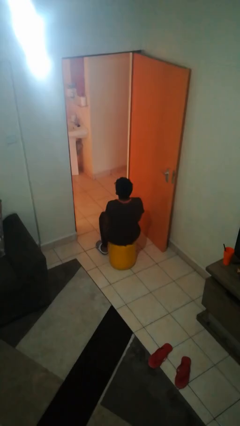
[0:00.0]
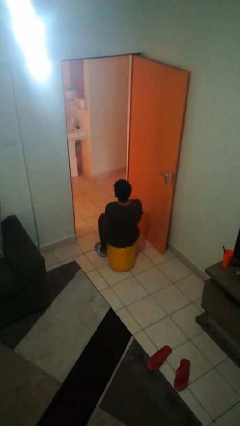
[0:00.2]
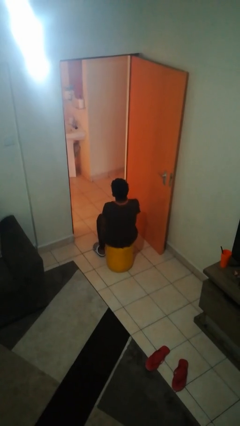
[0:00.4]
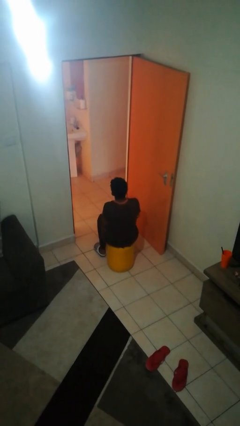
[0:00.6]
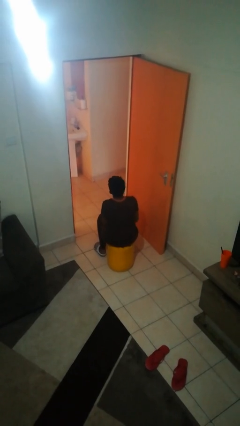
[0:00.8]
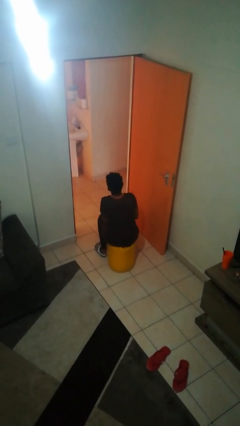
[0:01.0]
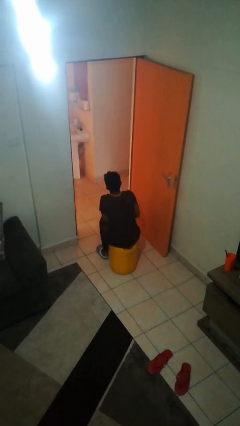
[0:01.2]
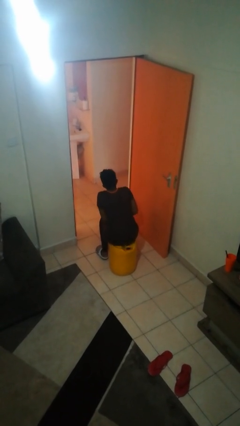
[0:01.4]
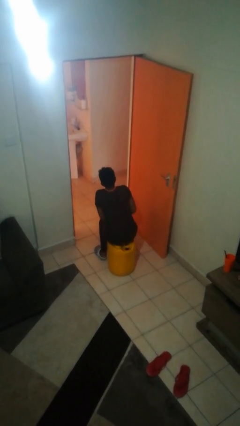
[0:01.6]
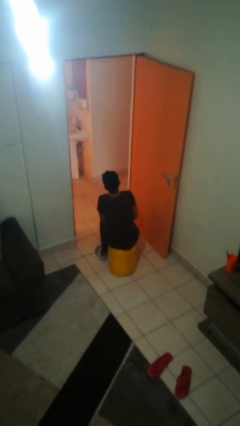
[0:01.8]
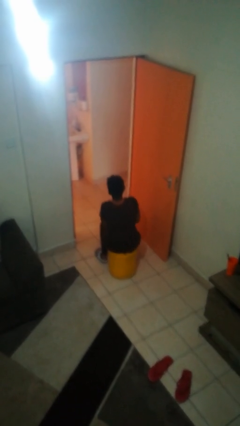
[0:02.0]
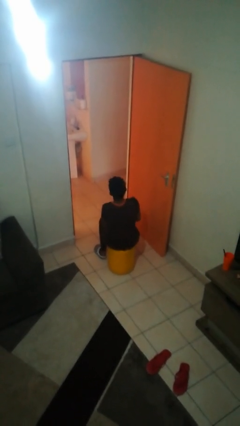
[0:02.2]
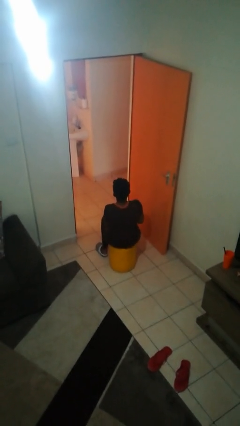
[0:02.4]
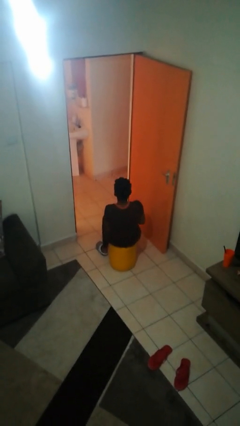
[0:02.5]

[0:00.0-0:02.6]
person slaps hands on thighs

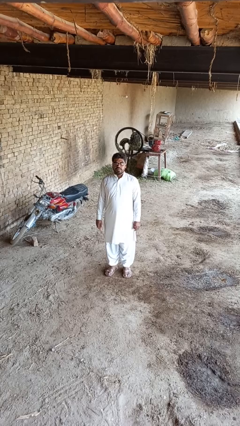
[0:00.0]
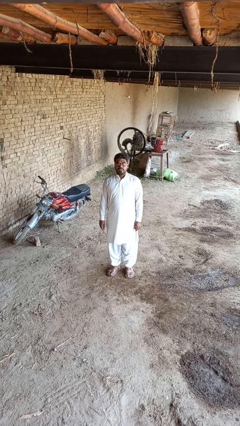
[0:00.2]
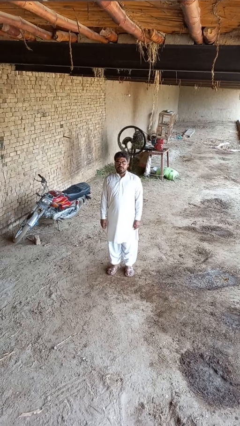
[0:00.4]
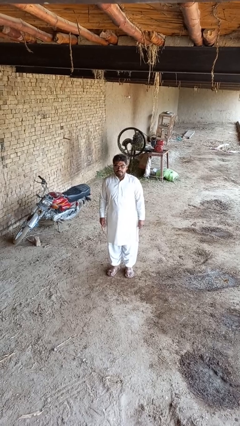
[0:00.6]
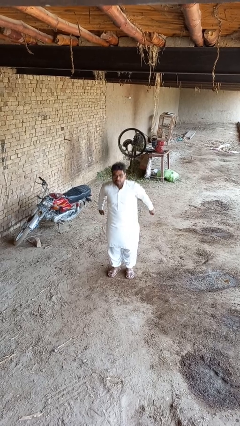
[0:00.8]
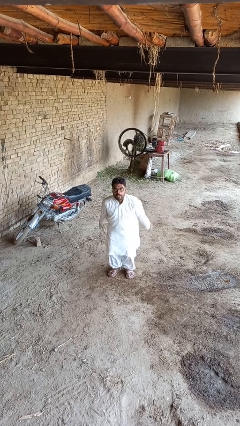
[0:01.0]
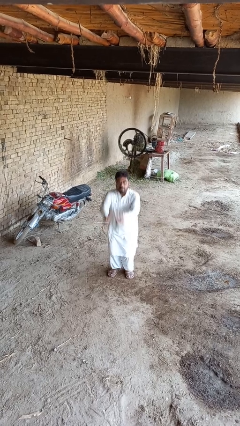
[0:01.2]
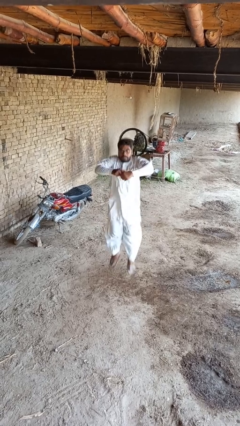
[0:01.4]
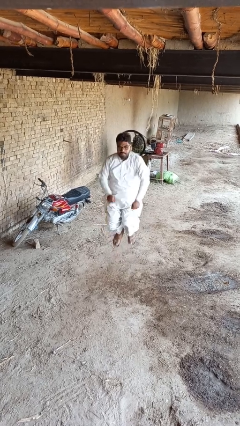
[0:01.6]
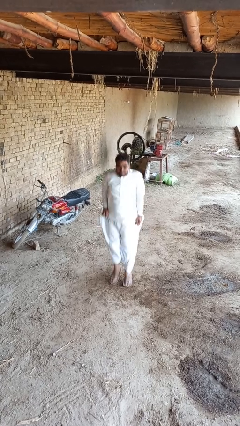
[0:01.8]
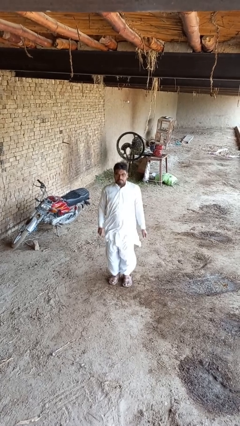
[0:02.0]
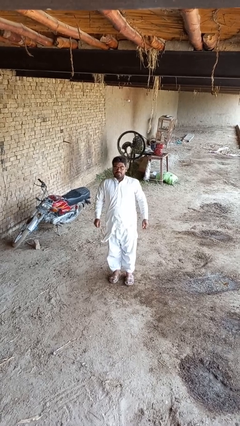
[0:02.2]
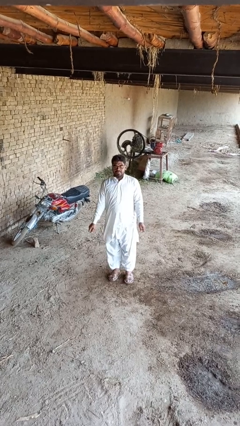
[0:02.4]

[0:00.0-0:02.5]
person jumps

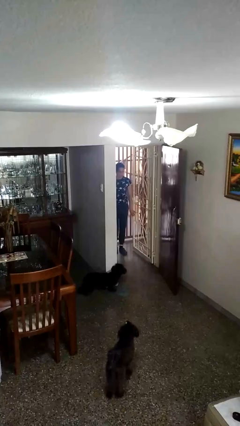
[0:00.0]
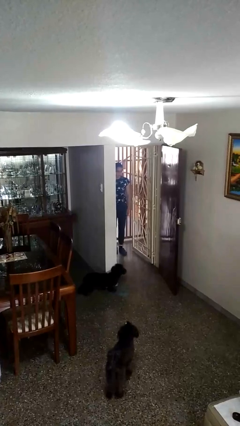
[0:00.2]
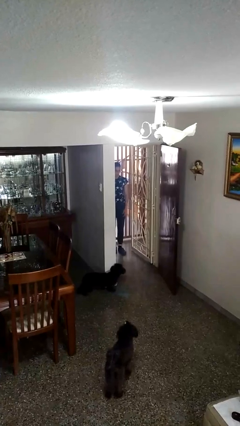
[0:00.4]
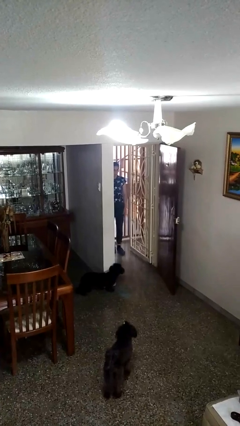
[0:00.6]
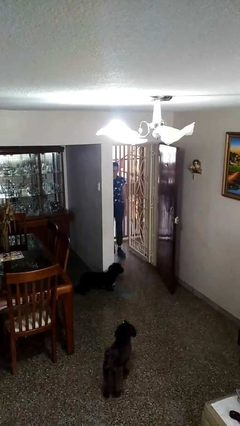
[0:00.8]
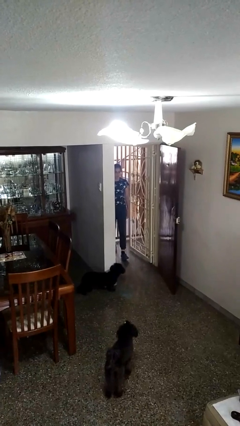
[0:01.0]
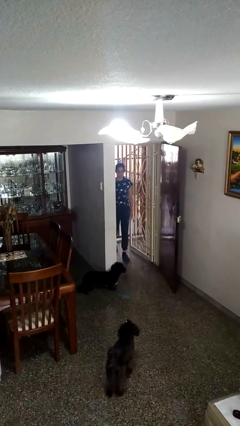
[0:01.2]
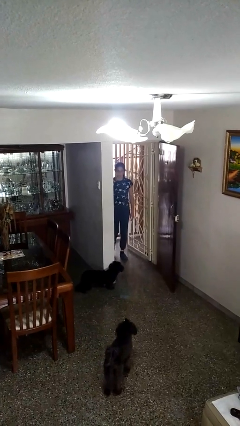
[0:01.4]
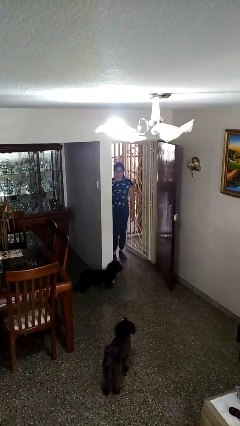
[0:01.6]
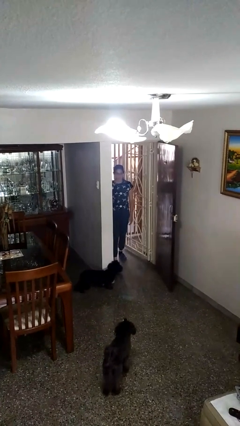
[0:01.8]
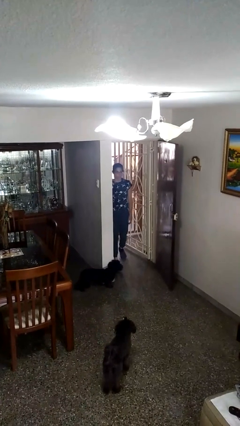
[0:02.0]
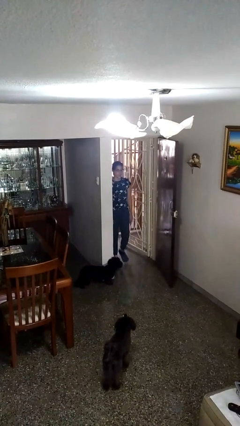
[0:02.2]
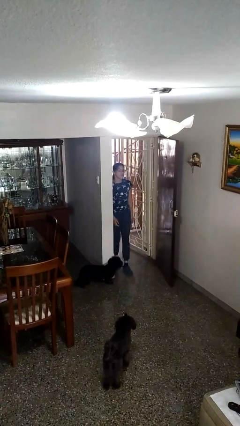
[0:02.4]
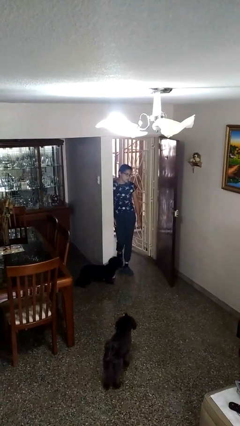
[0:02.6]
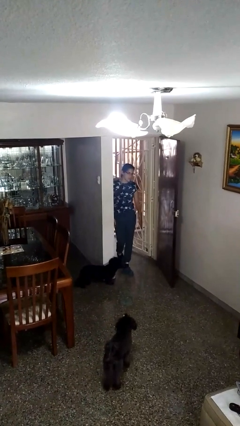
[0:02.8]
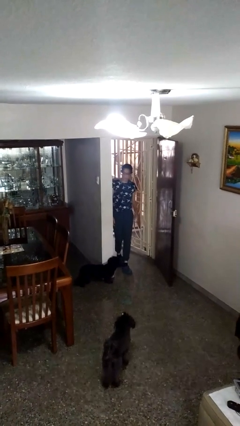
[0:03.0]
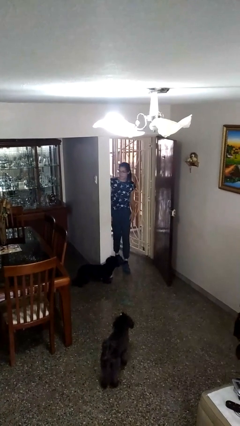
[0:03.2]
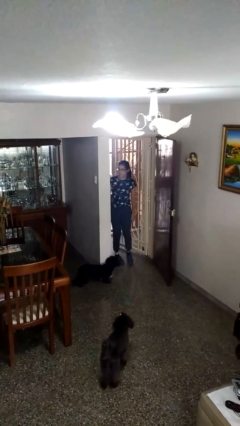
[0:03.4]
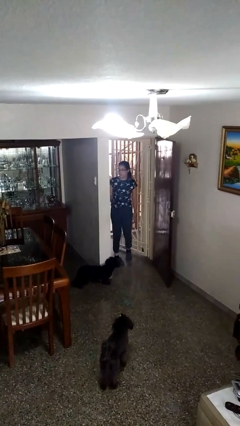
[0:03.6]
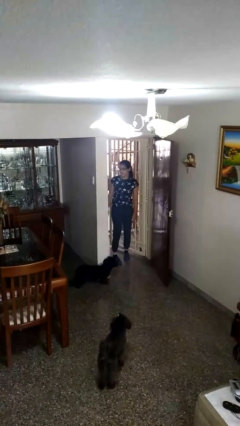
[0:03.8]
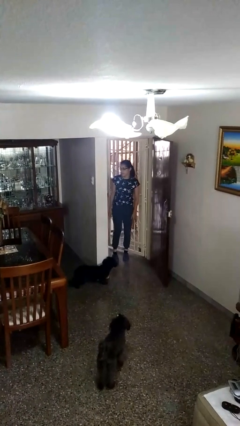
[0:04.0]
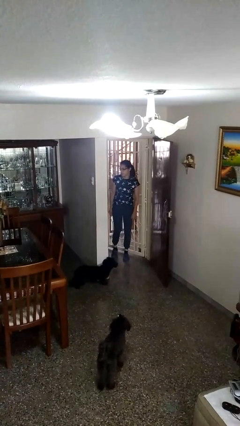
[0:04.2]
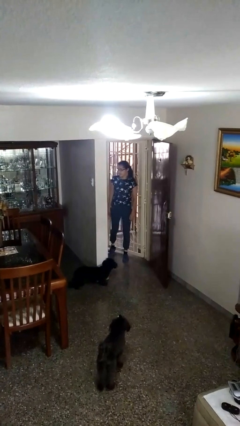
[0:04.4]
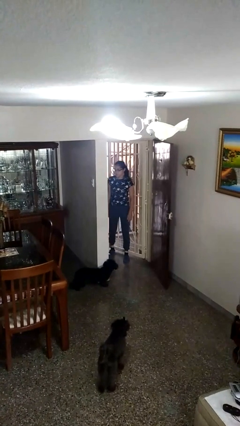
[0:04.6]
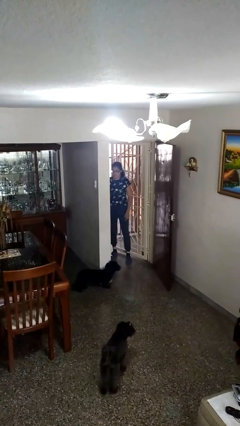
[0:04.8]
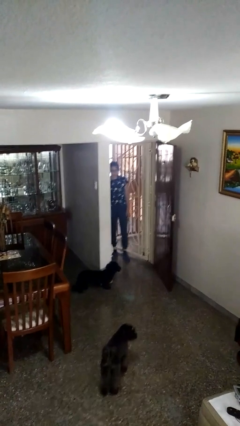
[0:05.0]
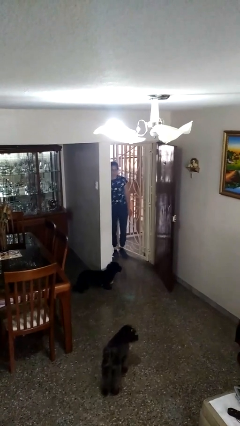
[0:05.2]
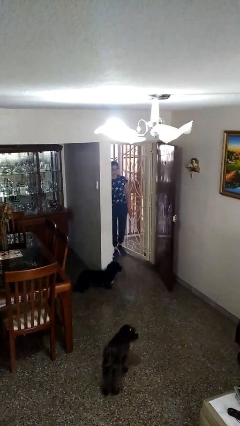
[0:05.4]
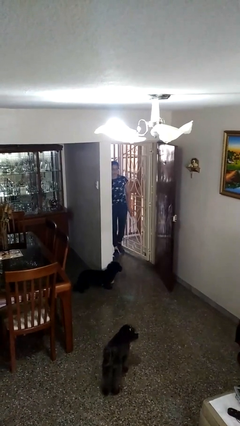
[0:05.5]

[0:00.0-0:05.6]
person bumps into wall

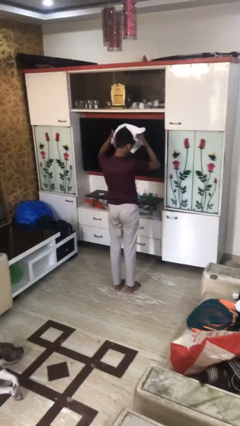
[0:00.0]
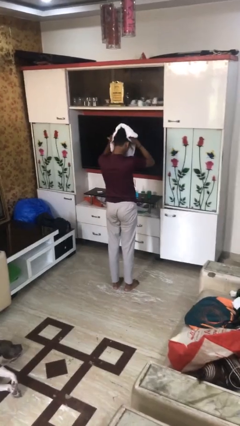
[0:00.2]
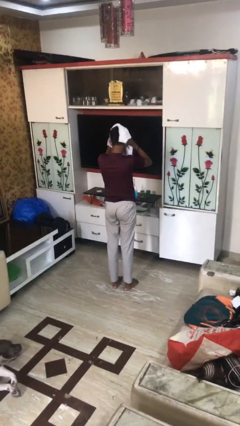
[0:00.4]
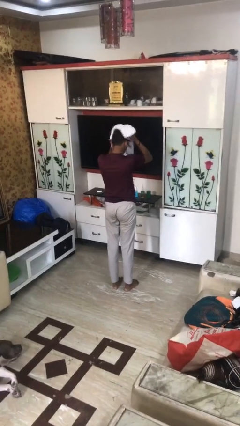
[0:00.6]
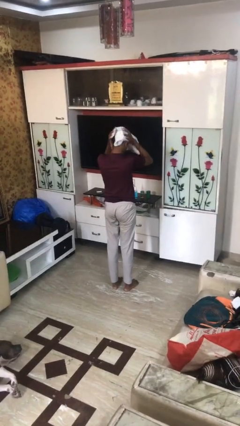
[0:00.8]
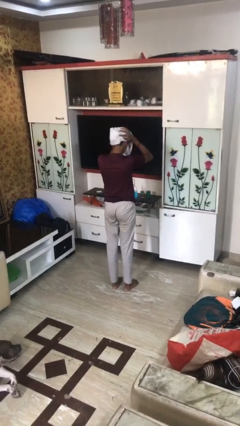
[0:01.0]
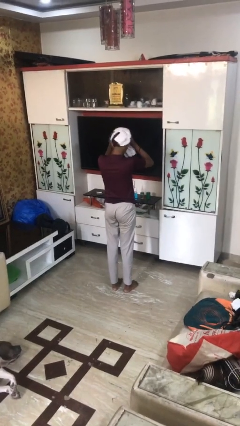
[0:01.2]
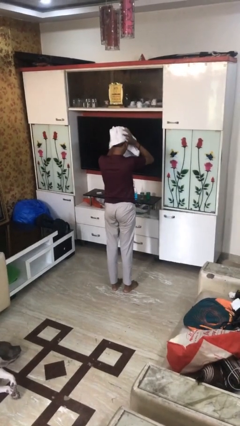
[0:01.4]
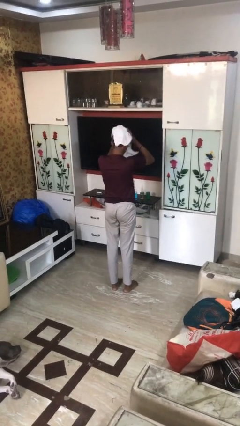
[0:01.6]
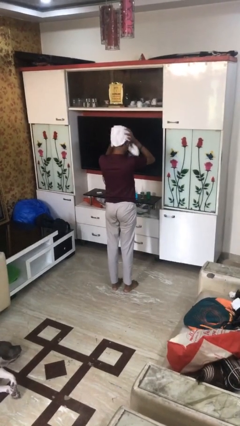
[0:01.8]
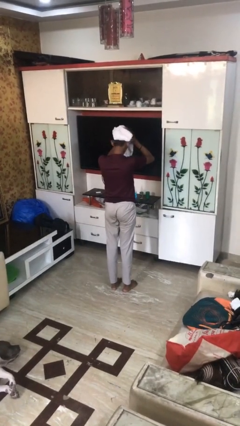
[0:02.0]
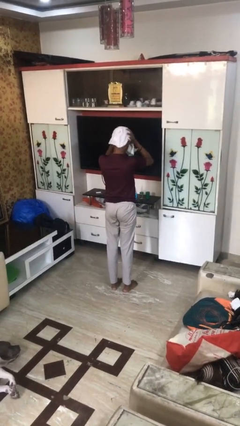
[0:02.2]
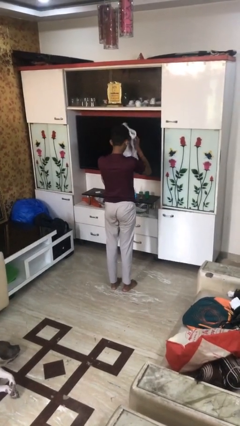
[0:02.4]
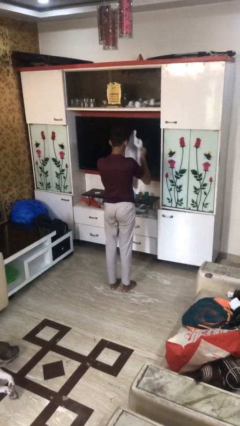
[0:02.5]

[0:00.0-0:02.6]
person dries hair with towel

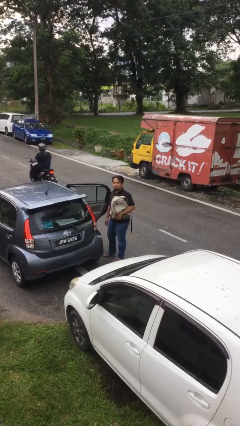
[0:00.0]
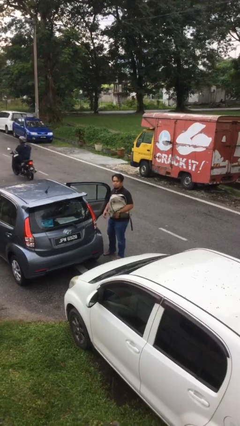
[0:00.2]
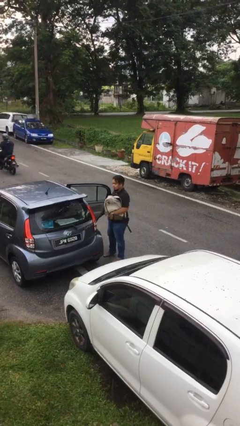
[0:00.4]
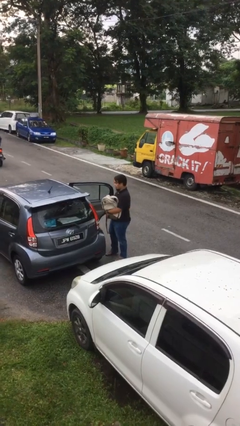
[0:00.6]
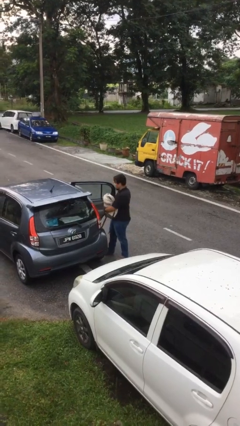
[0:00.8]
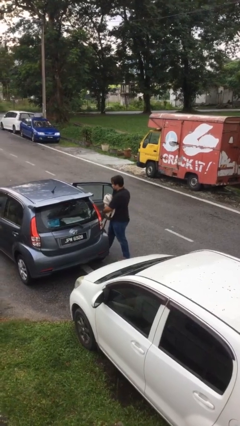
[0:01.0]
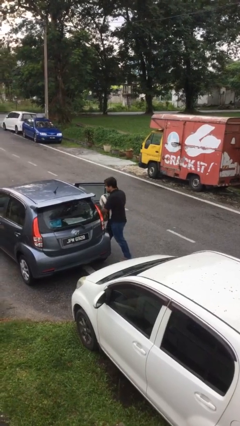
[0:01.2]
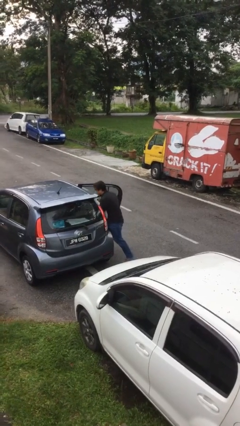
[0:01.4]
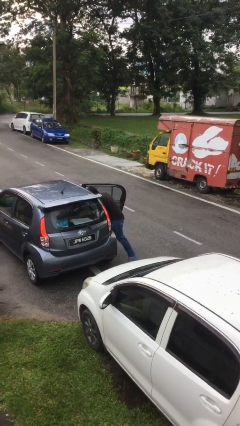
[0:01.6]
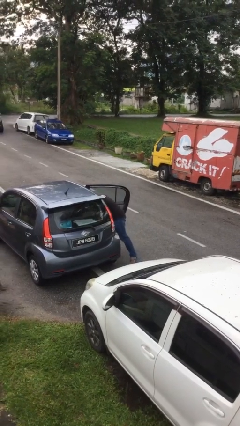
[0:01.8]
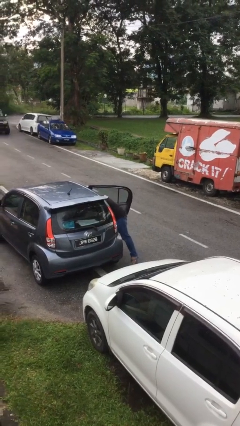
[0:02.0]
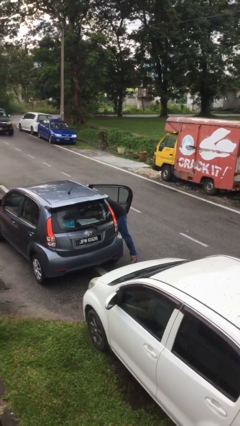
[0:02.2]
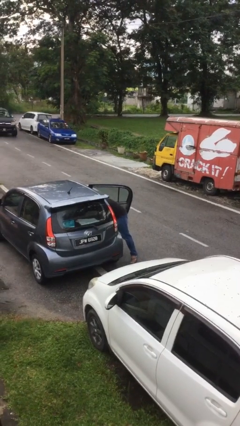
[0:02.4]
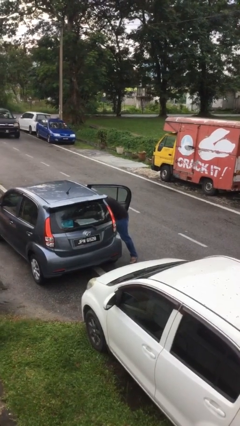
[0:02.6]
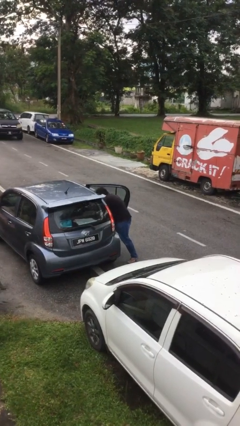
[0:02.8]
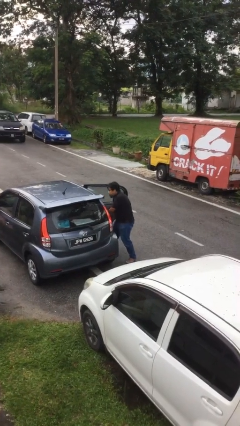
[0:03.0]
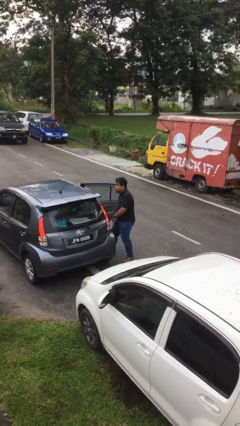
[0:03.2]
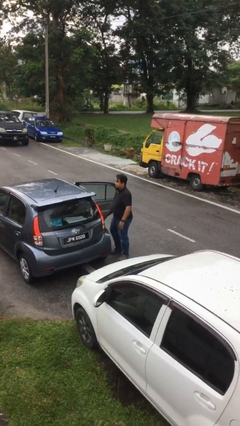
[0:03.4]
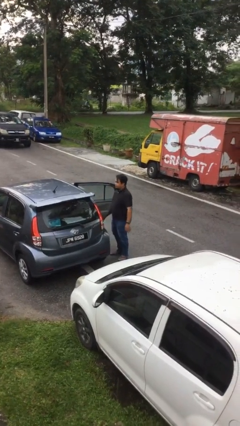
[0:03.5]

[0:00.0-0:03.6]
person loads car

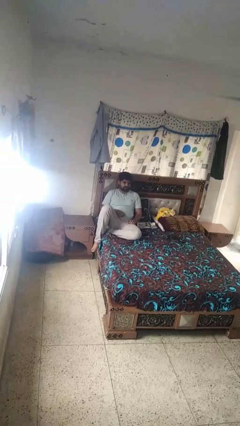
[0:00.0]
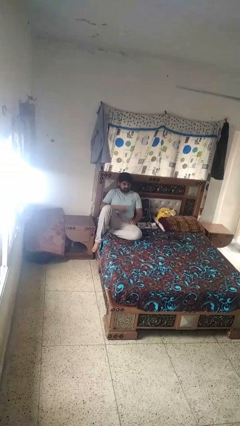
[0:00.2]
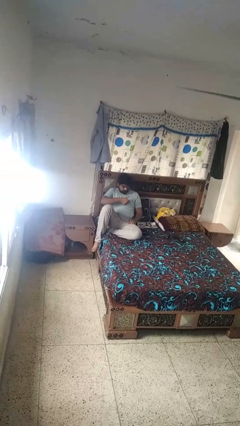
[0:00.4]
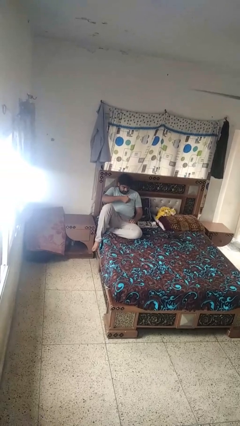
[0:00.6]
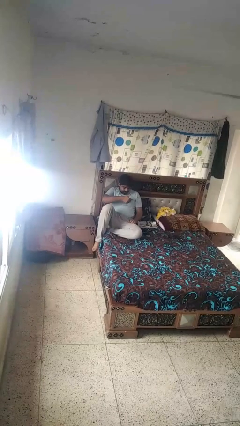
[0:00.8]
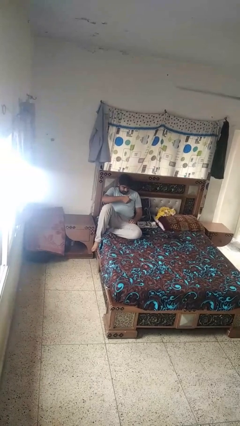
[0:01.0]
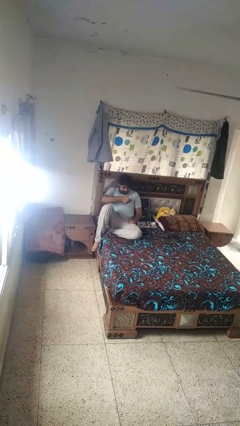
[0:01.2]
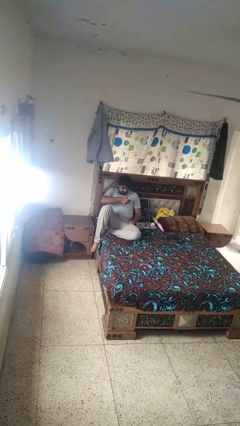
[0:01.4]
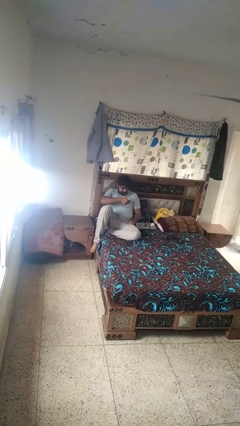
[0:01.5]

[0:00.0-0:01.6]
person gestures thumbs up
